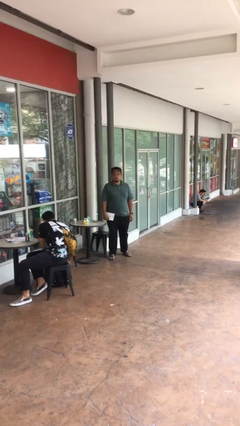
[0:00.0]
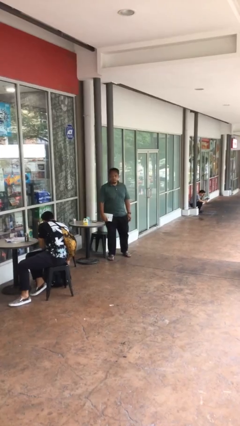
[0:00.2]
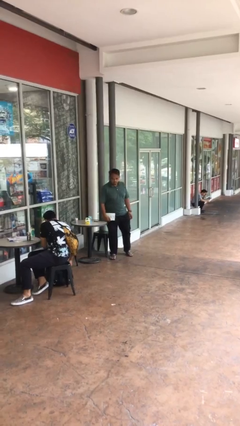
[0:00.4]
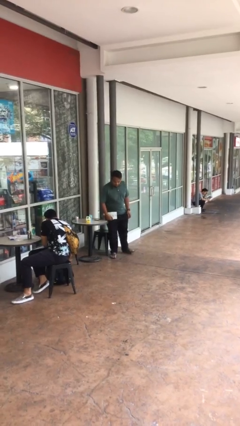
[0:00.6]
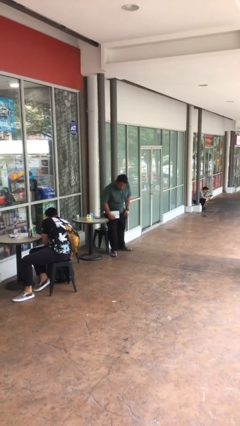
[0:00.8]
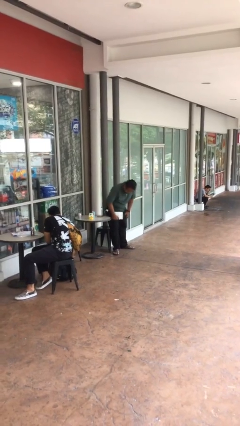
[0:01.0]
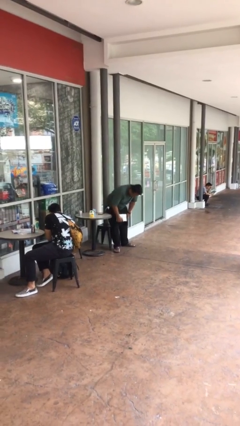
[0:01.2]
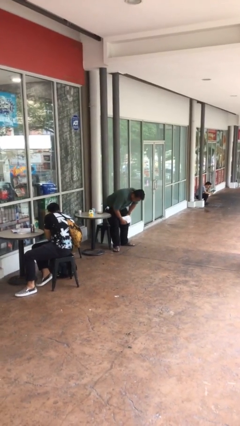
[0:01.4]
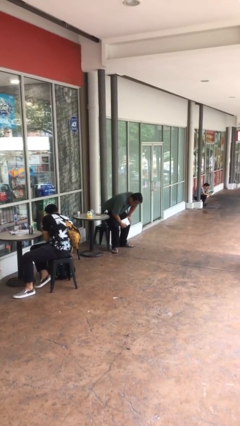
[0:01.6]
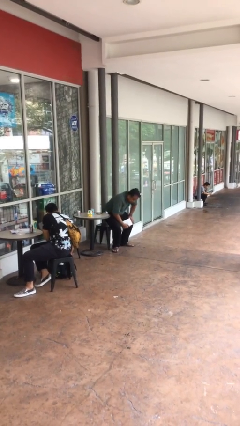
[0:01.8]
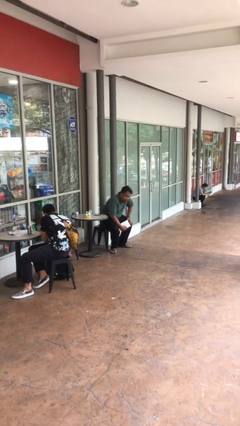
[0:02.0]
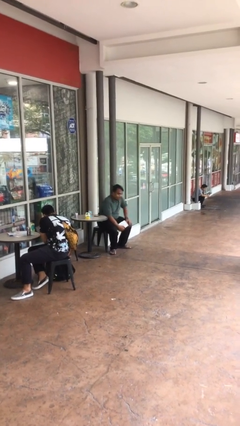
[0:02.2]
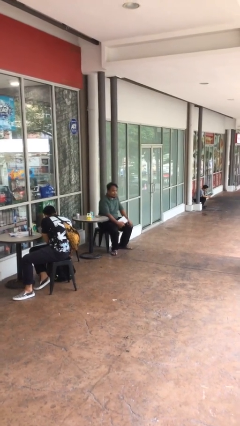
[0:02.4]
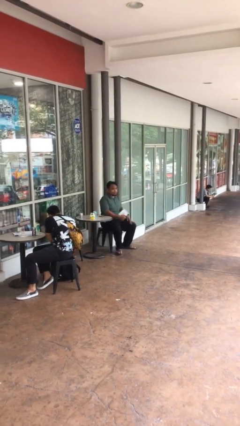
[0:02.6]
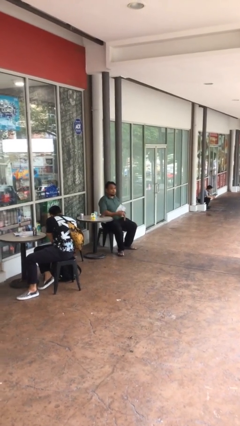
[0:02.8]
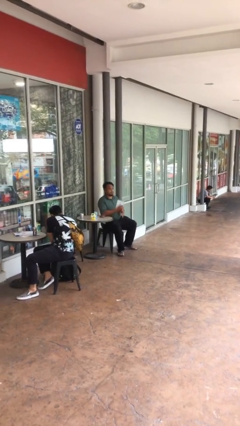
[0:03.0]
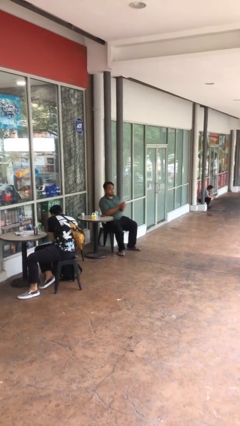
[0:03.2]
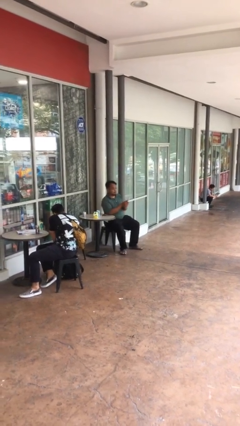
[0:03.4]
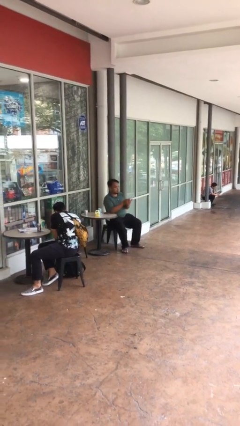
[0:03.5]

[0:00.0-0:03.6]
person sits down

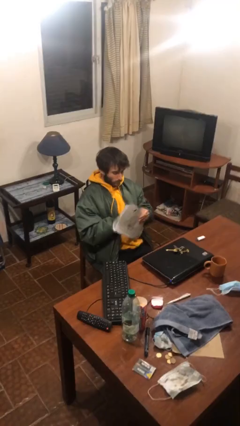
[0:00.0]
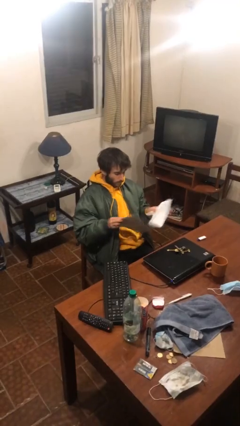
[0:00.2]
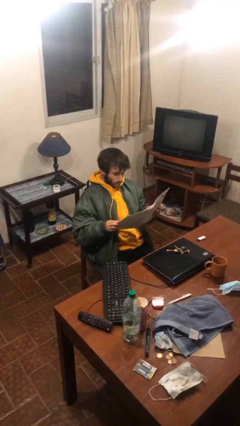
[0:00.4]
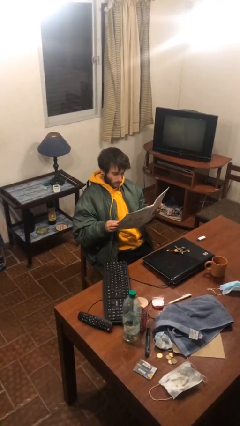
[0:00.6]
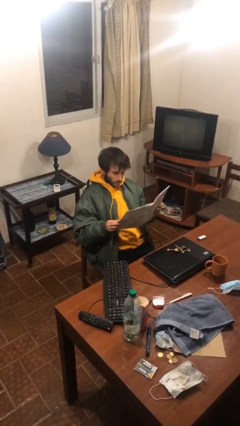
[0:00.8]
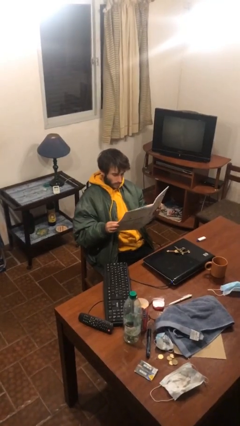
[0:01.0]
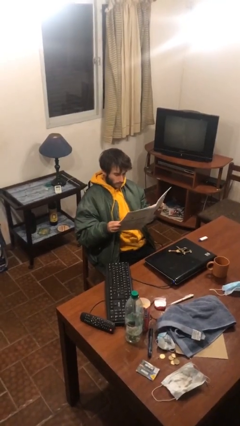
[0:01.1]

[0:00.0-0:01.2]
person reads document

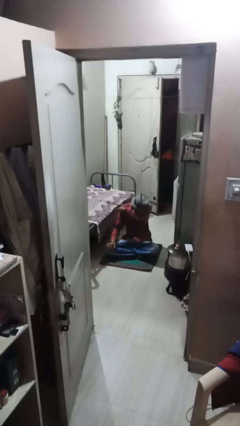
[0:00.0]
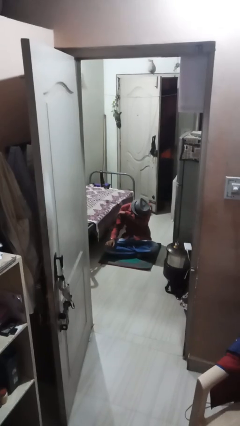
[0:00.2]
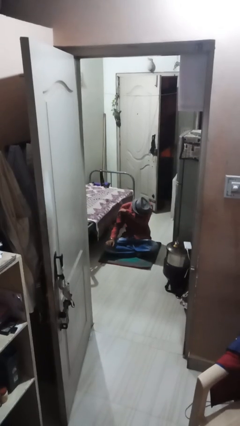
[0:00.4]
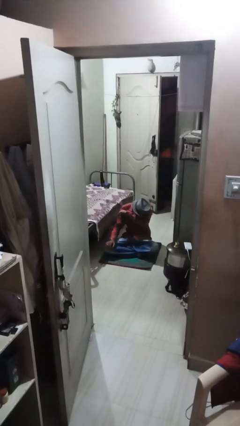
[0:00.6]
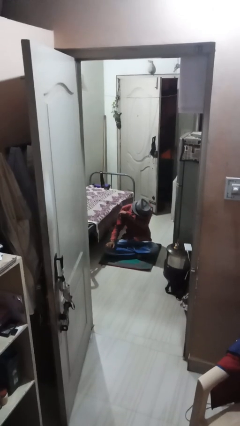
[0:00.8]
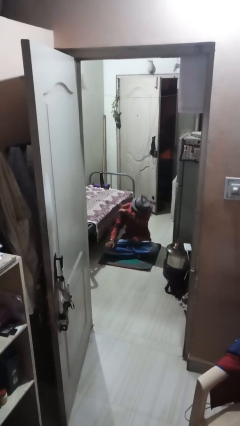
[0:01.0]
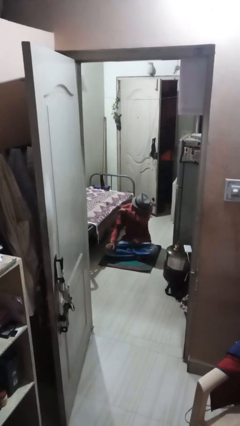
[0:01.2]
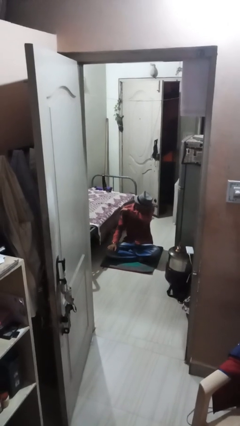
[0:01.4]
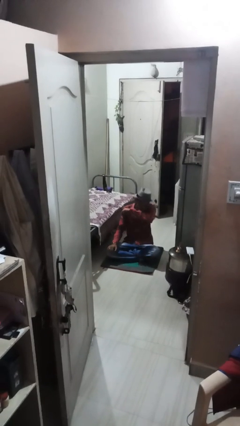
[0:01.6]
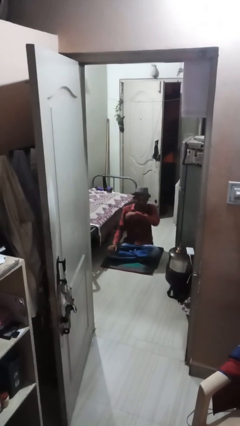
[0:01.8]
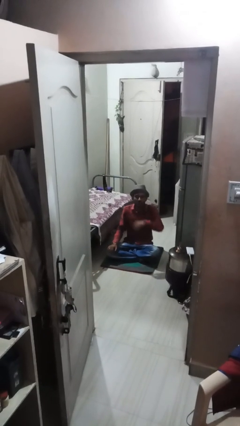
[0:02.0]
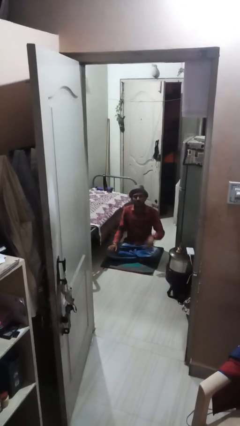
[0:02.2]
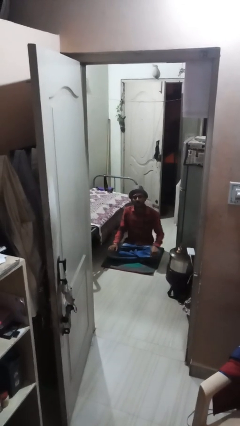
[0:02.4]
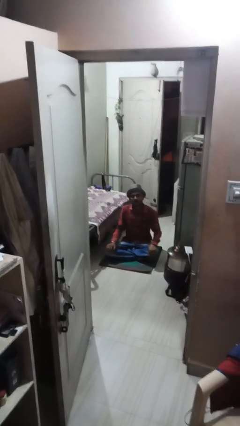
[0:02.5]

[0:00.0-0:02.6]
person sneezes into arm

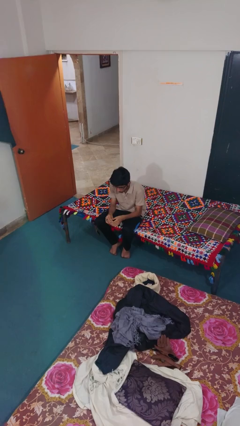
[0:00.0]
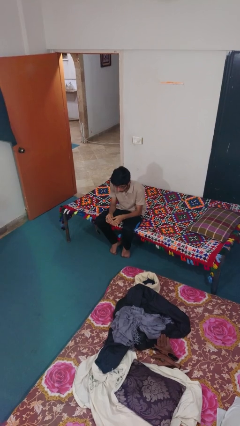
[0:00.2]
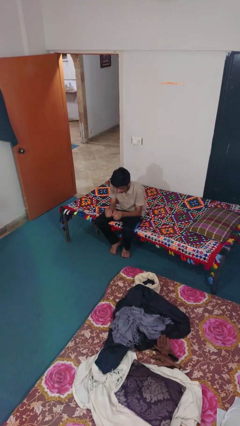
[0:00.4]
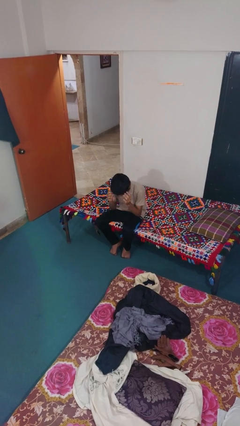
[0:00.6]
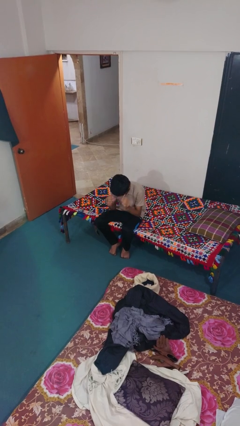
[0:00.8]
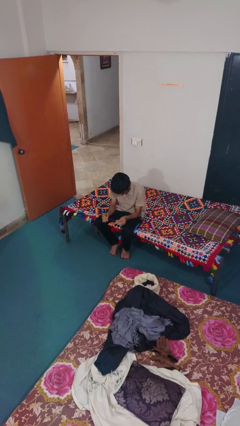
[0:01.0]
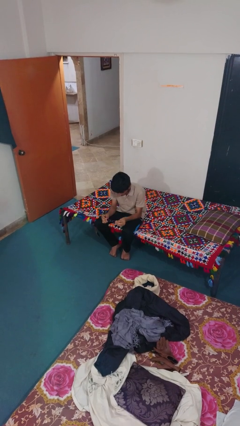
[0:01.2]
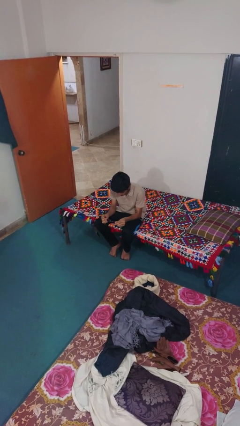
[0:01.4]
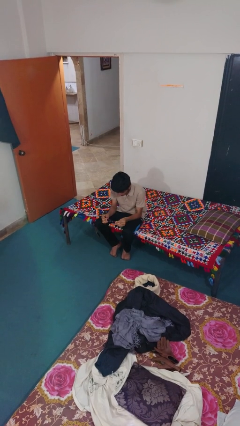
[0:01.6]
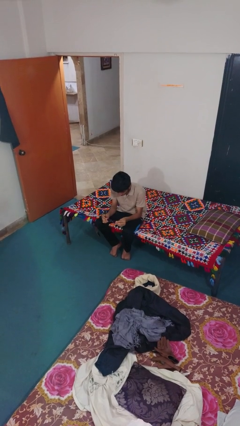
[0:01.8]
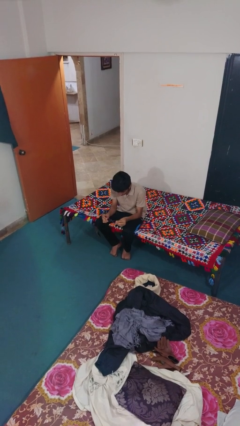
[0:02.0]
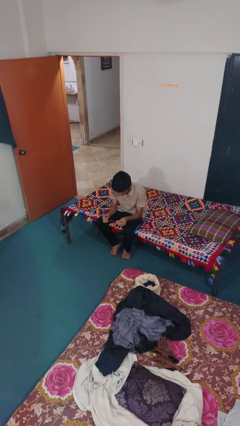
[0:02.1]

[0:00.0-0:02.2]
person takes off glasses

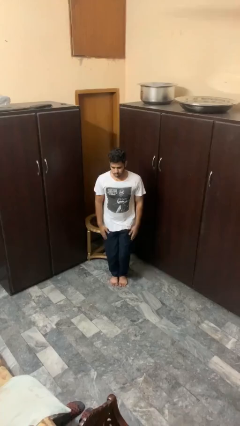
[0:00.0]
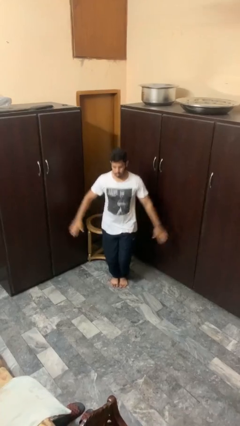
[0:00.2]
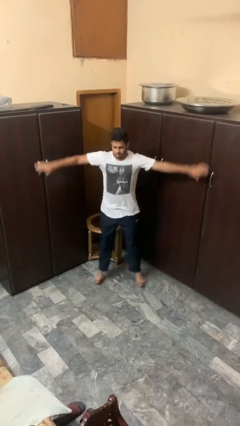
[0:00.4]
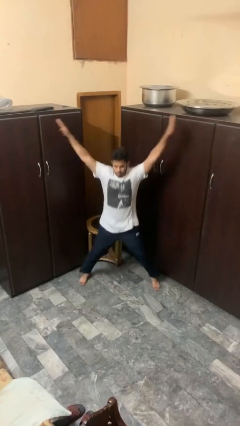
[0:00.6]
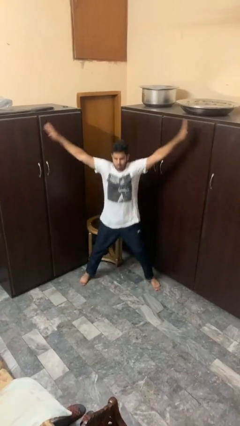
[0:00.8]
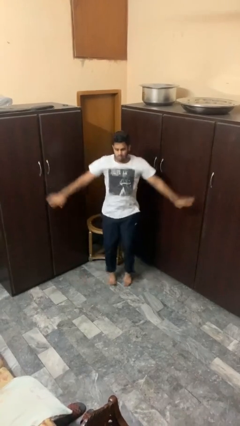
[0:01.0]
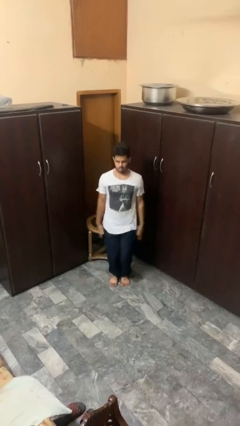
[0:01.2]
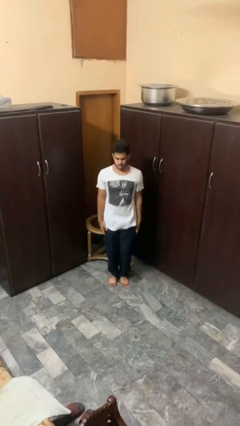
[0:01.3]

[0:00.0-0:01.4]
person exercises with jumping jacks

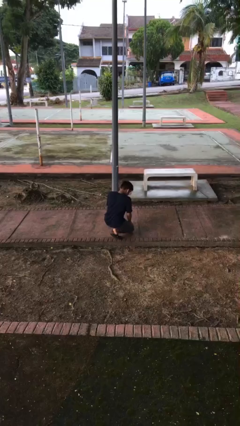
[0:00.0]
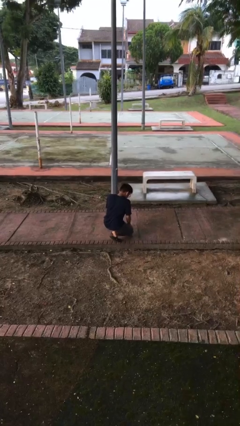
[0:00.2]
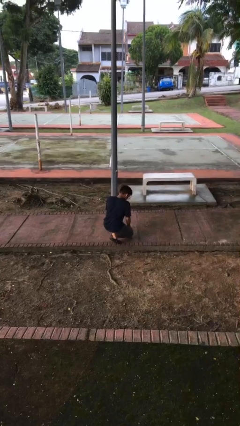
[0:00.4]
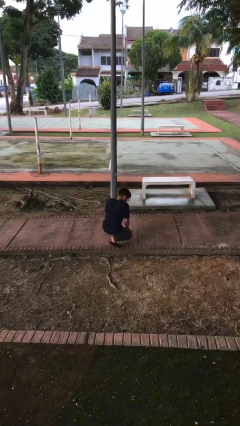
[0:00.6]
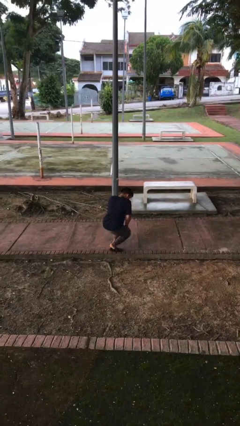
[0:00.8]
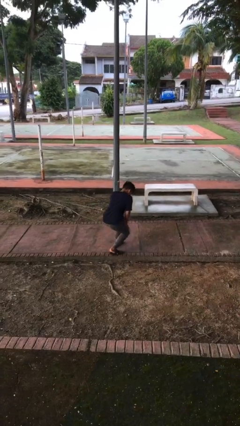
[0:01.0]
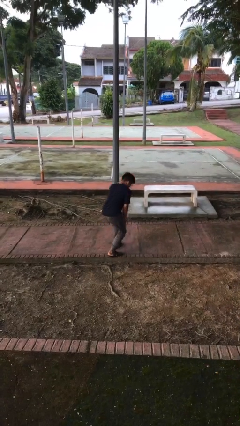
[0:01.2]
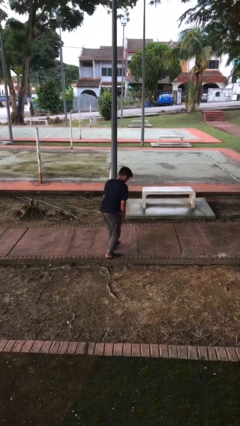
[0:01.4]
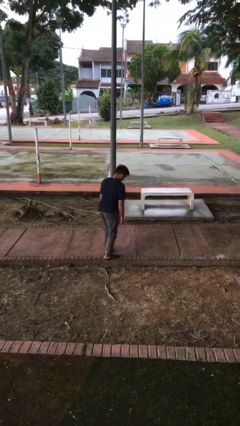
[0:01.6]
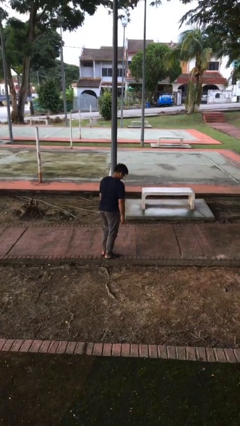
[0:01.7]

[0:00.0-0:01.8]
person stands up from floor

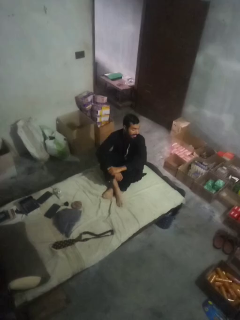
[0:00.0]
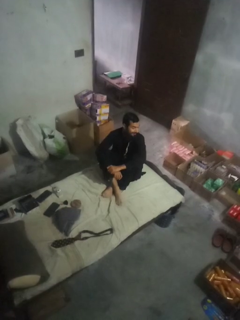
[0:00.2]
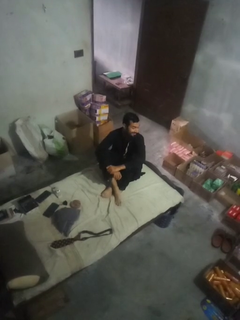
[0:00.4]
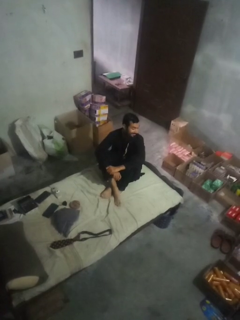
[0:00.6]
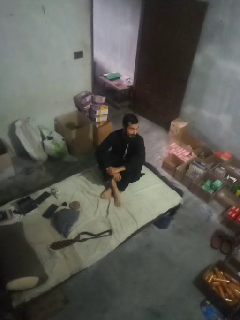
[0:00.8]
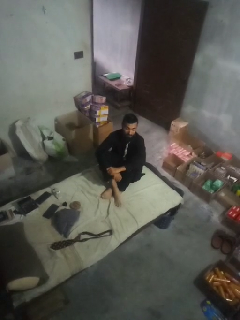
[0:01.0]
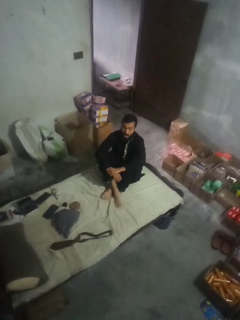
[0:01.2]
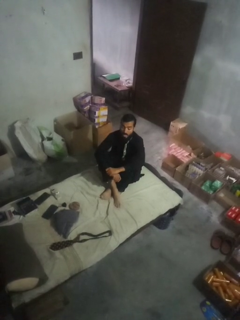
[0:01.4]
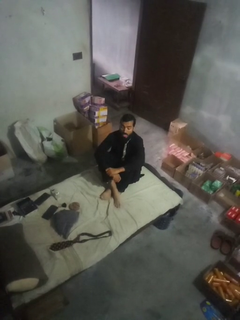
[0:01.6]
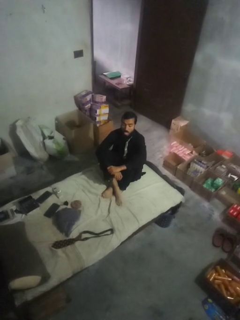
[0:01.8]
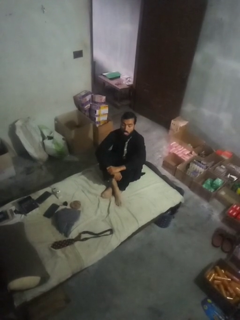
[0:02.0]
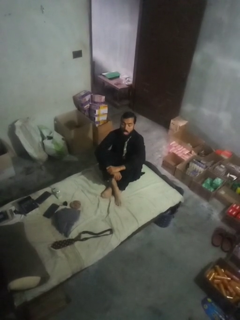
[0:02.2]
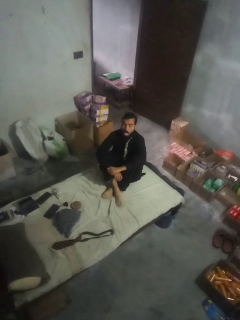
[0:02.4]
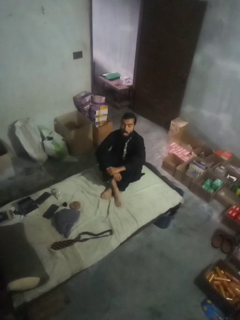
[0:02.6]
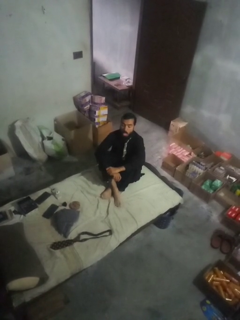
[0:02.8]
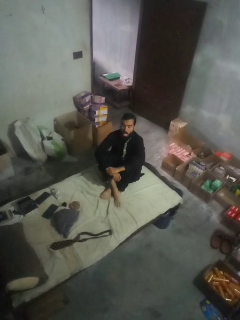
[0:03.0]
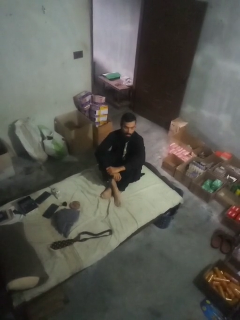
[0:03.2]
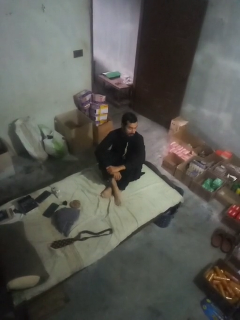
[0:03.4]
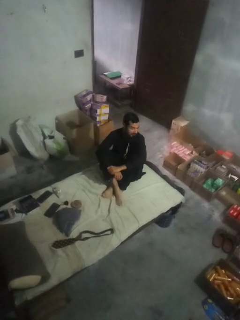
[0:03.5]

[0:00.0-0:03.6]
person sticks out tongue

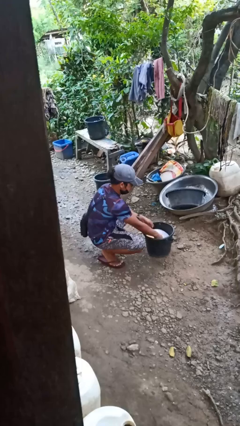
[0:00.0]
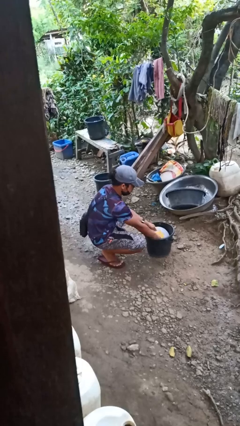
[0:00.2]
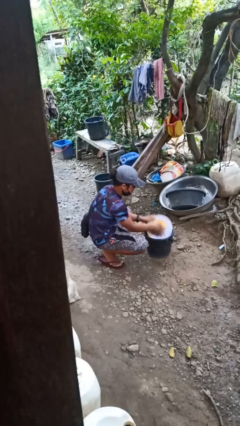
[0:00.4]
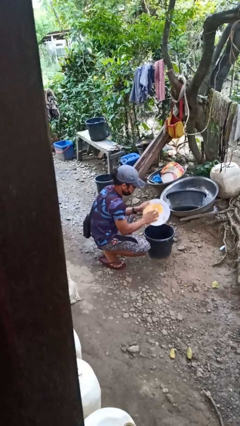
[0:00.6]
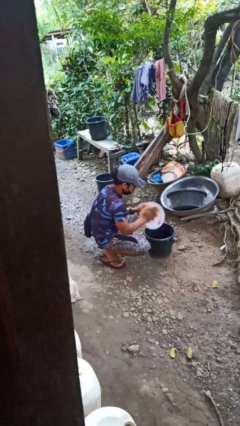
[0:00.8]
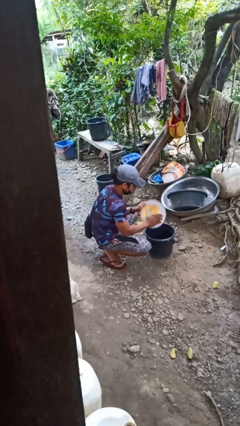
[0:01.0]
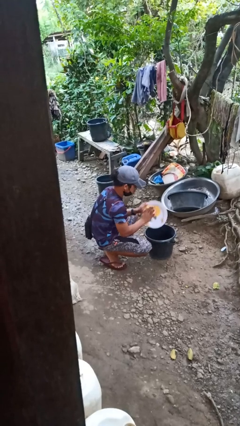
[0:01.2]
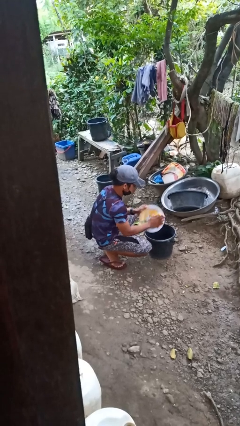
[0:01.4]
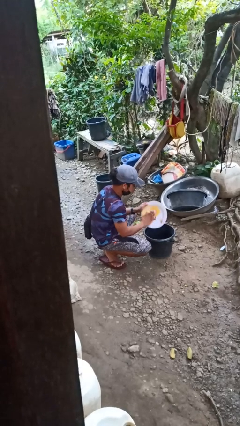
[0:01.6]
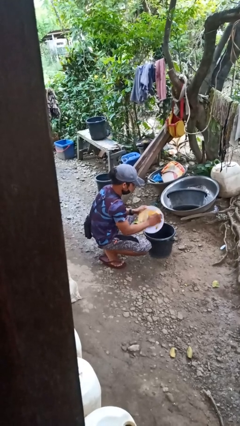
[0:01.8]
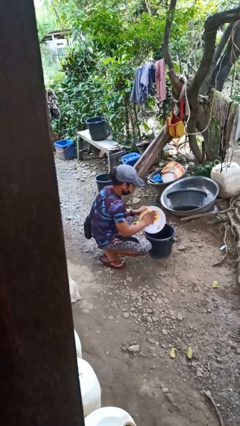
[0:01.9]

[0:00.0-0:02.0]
person washes dish
